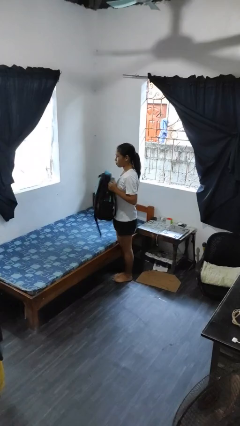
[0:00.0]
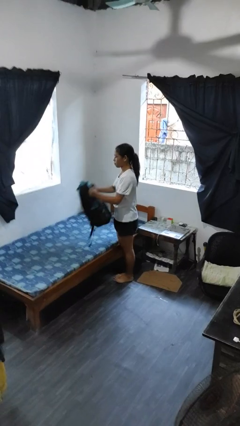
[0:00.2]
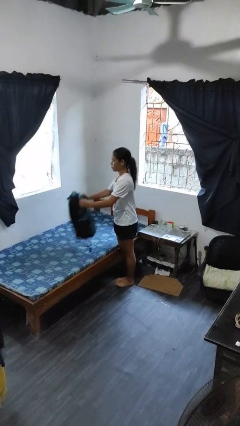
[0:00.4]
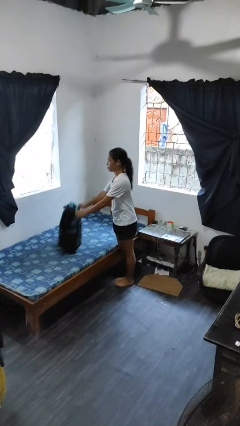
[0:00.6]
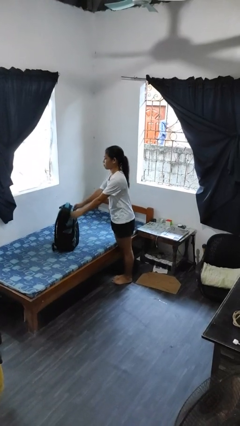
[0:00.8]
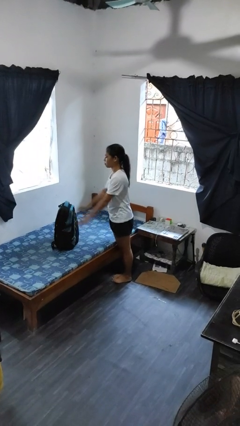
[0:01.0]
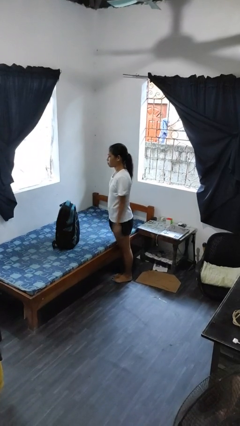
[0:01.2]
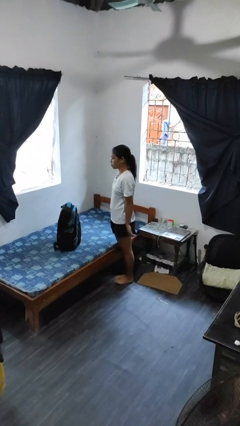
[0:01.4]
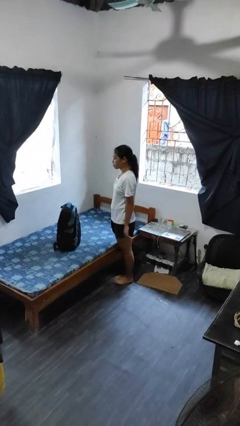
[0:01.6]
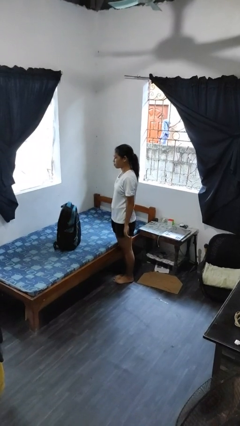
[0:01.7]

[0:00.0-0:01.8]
person puts down object on bed

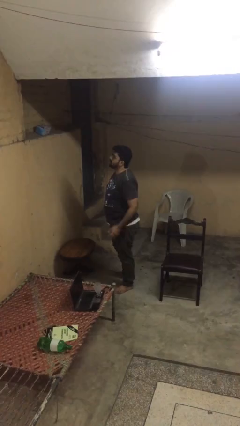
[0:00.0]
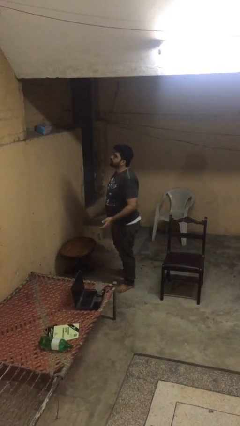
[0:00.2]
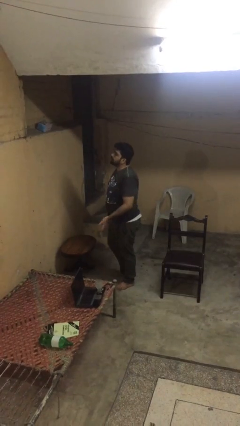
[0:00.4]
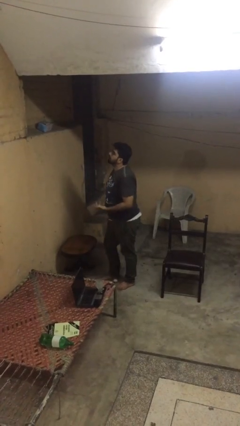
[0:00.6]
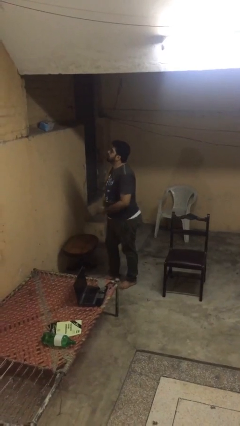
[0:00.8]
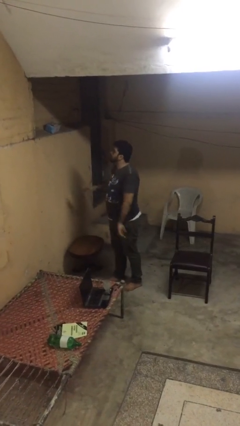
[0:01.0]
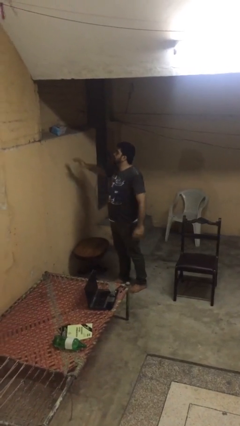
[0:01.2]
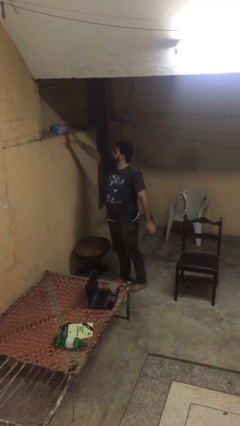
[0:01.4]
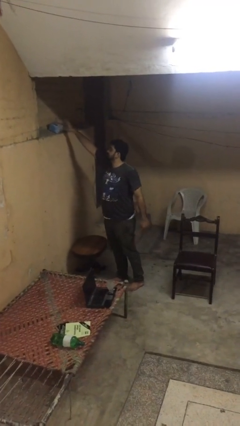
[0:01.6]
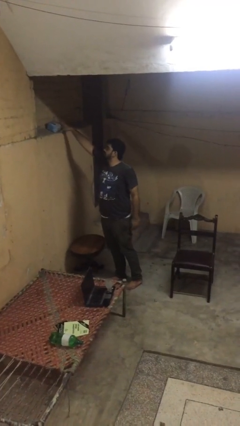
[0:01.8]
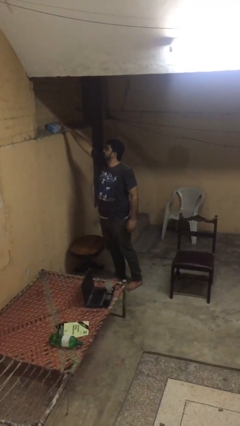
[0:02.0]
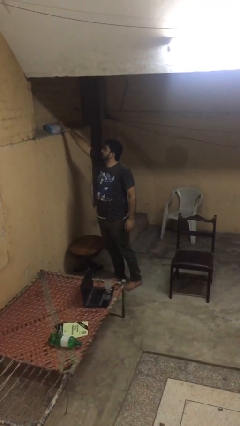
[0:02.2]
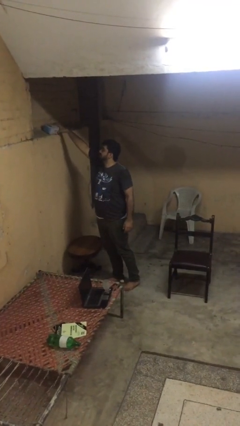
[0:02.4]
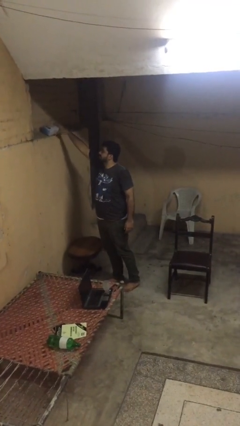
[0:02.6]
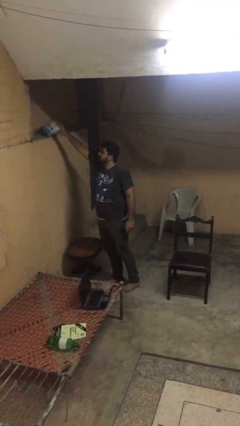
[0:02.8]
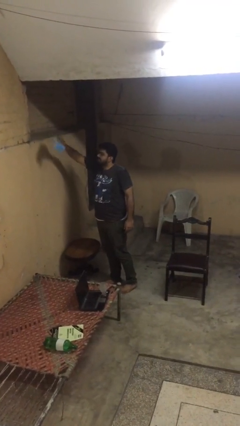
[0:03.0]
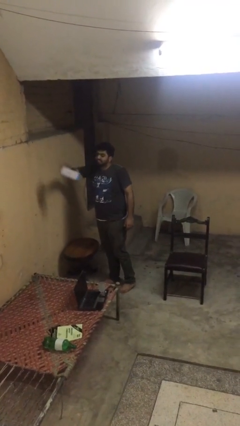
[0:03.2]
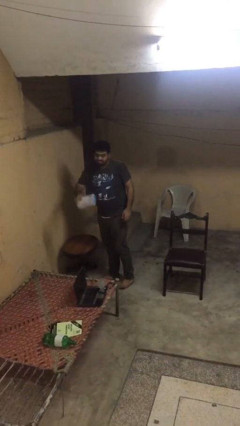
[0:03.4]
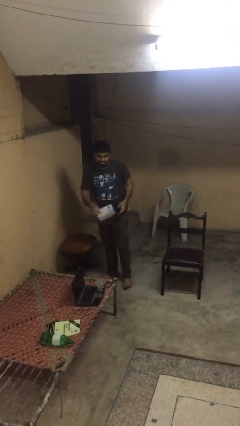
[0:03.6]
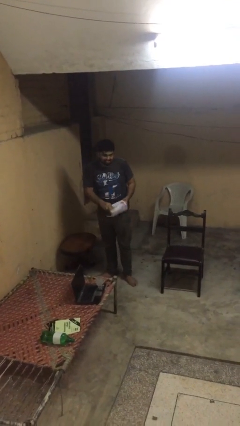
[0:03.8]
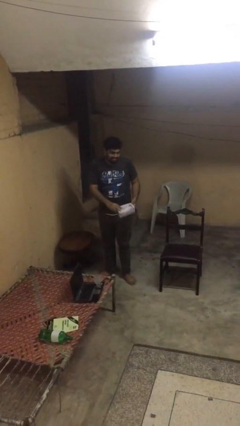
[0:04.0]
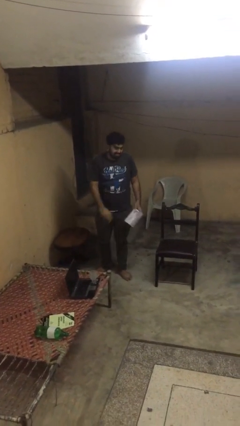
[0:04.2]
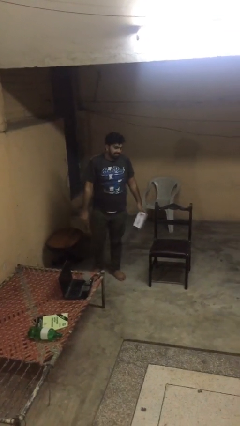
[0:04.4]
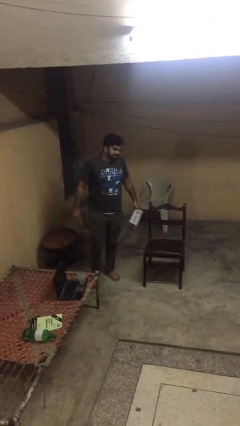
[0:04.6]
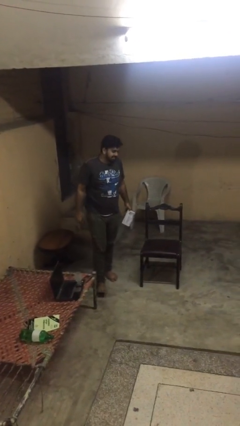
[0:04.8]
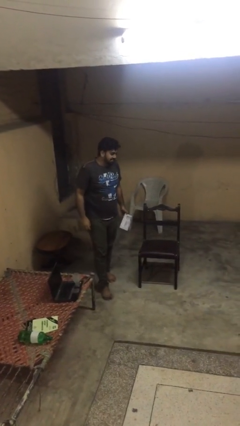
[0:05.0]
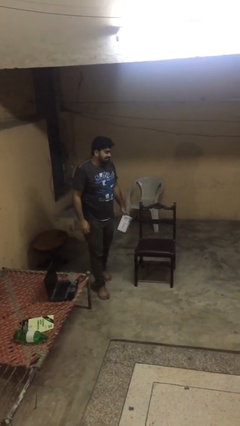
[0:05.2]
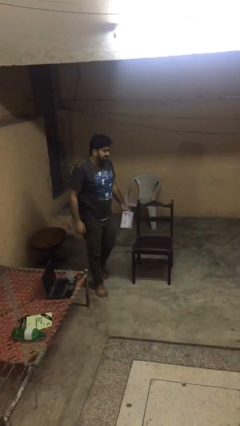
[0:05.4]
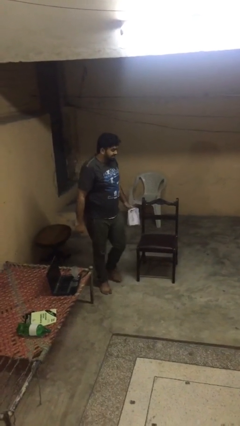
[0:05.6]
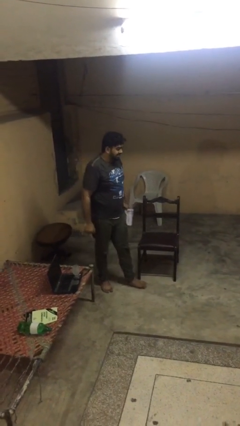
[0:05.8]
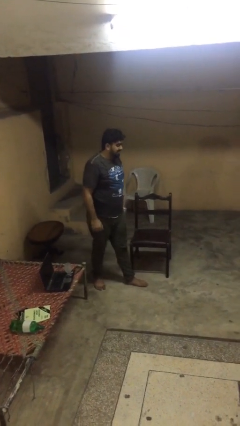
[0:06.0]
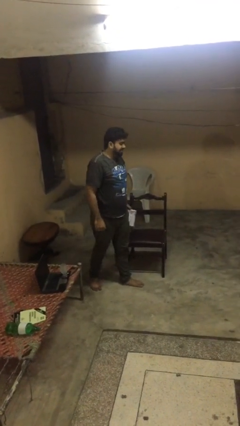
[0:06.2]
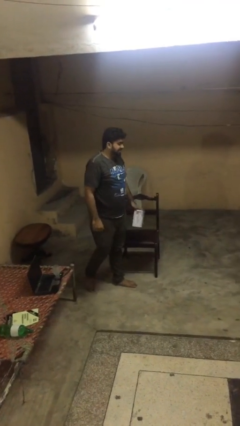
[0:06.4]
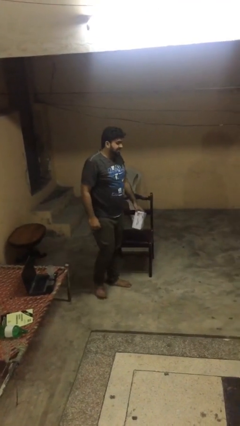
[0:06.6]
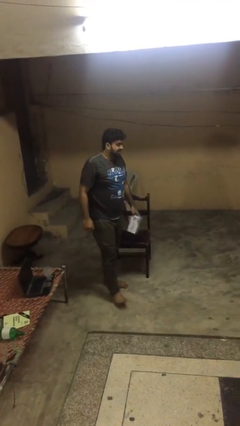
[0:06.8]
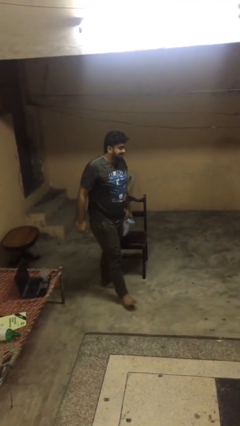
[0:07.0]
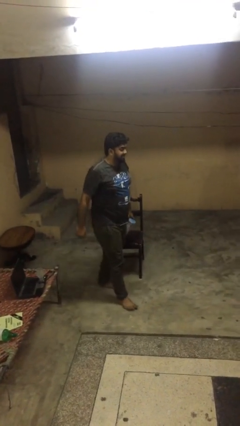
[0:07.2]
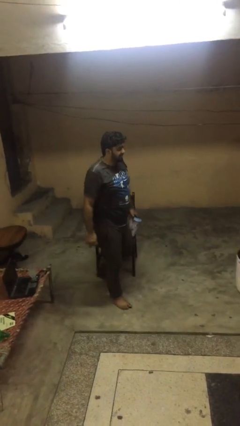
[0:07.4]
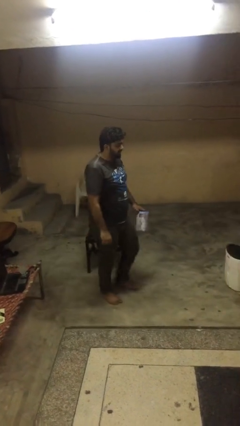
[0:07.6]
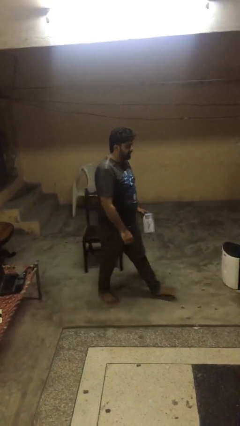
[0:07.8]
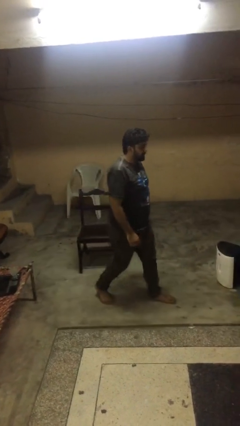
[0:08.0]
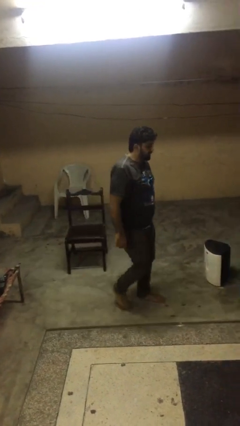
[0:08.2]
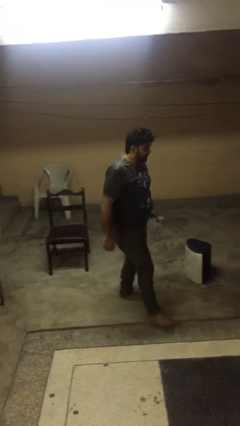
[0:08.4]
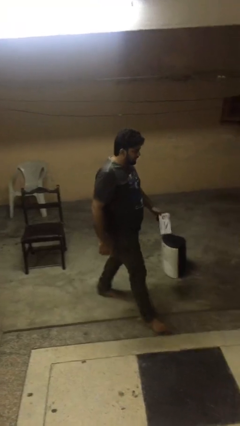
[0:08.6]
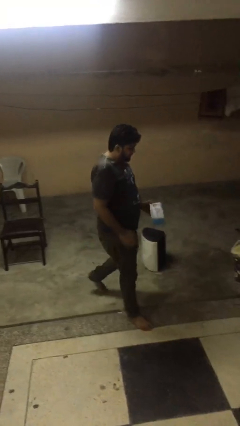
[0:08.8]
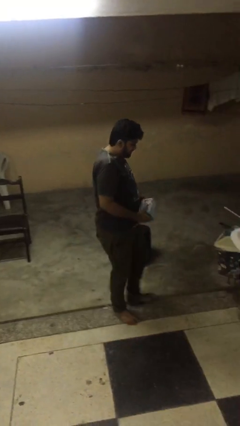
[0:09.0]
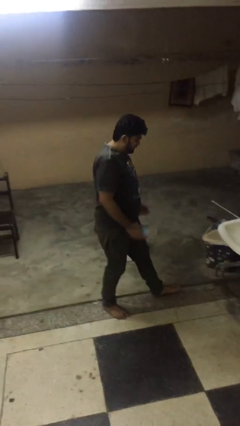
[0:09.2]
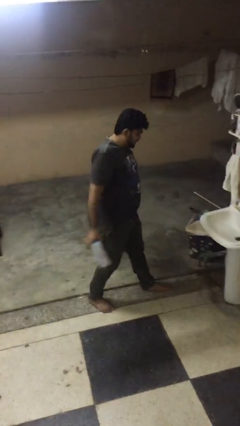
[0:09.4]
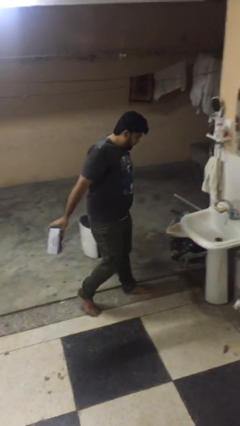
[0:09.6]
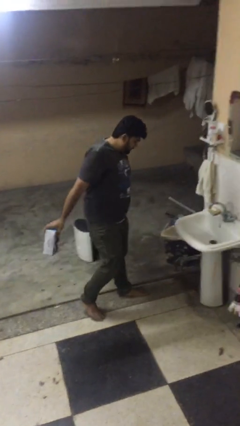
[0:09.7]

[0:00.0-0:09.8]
person picks up object from shelf

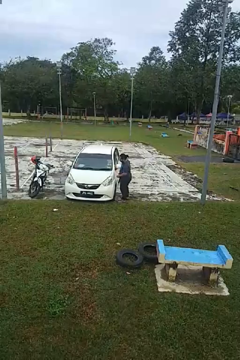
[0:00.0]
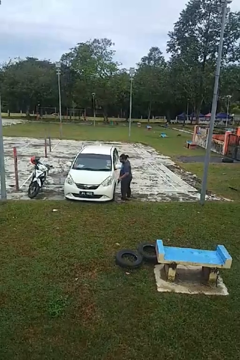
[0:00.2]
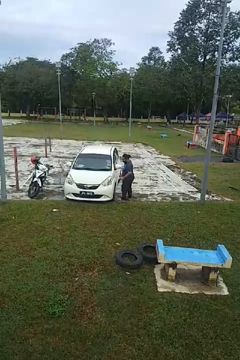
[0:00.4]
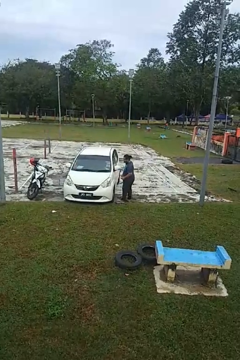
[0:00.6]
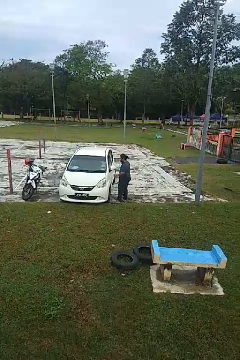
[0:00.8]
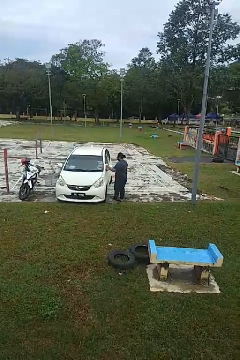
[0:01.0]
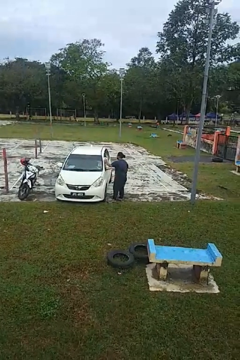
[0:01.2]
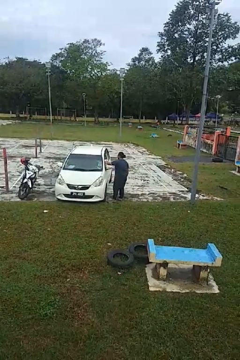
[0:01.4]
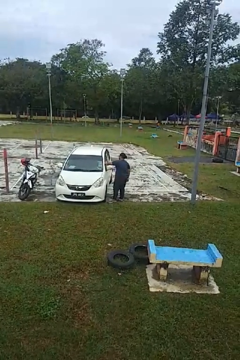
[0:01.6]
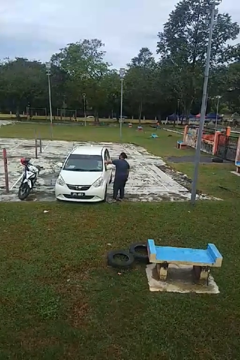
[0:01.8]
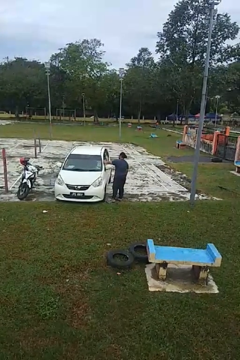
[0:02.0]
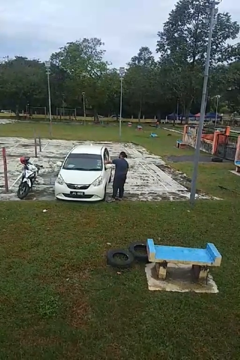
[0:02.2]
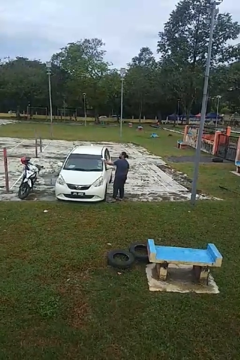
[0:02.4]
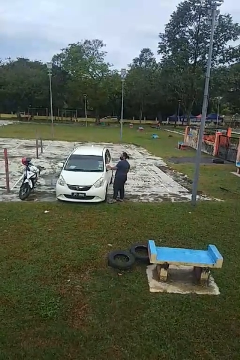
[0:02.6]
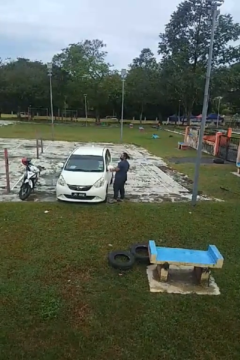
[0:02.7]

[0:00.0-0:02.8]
person polishes car with rag

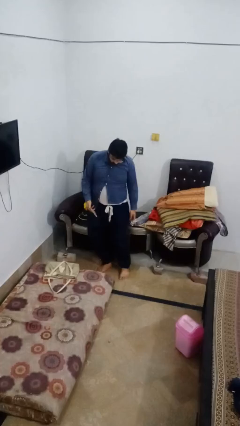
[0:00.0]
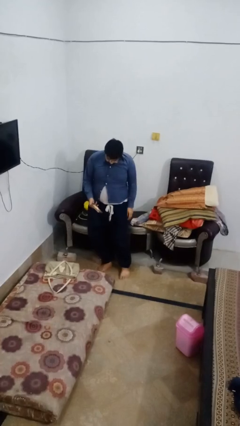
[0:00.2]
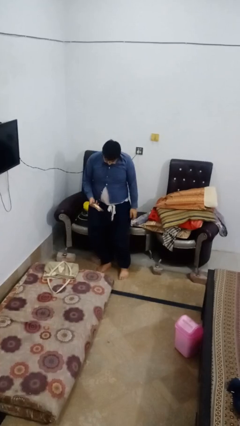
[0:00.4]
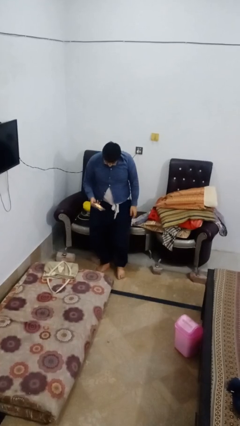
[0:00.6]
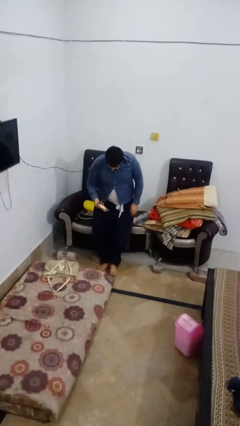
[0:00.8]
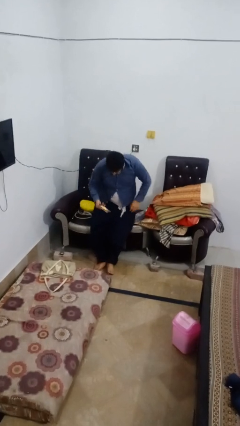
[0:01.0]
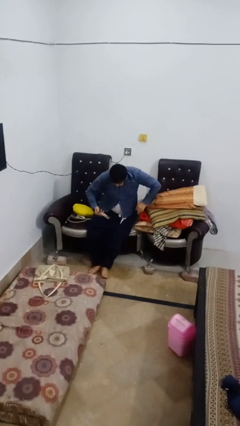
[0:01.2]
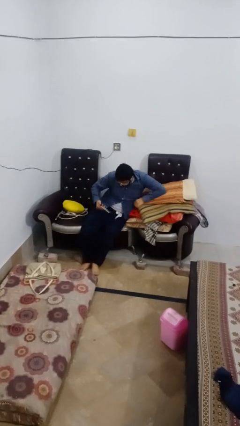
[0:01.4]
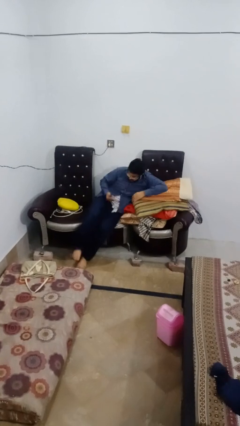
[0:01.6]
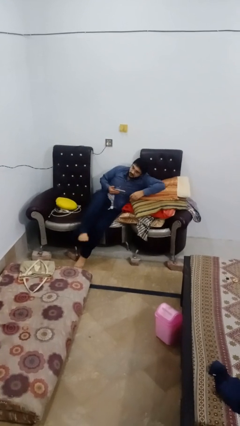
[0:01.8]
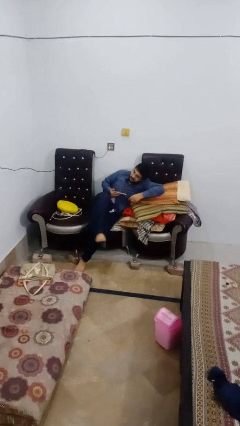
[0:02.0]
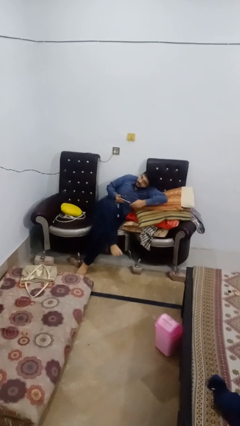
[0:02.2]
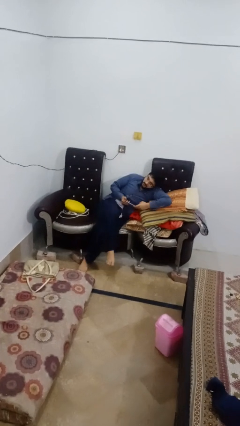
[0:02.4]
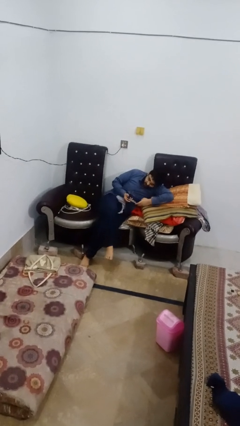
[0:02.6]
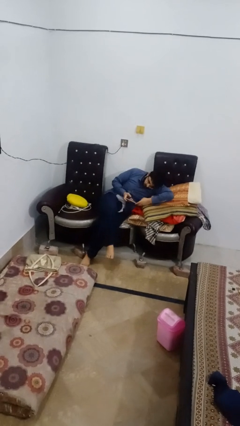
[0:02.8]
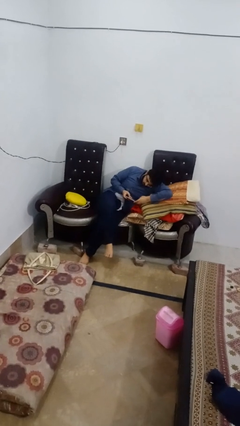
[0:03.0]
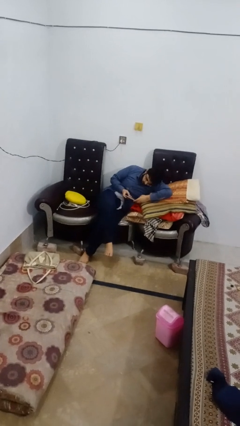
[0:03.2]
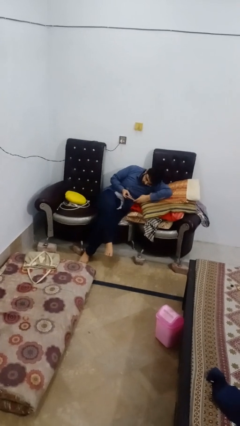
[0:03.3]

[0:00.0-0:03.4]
person lies down on couch
